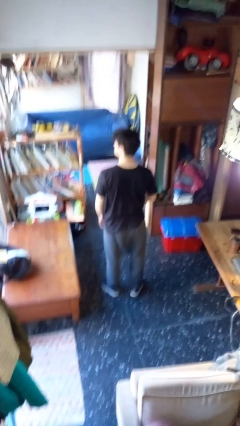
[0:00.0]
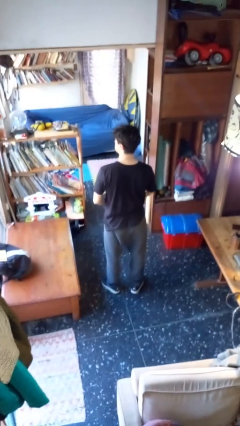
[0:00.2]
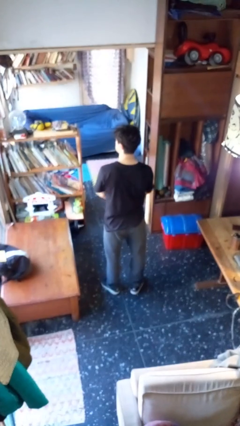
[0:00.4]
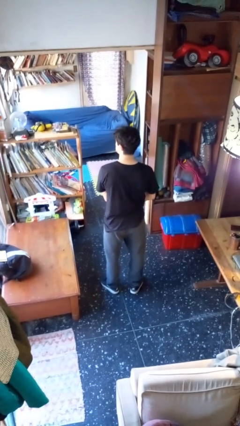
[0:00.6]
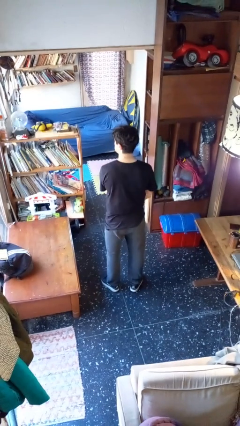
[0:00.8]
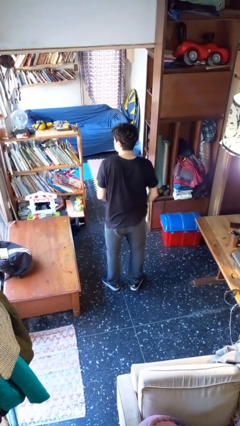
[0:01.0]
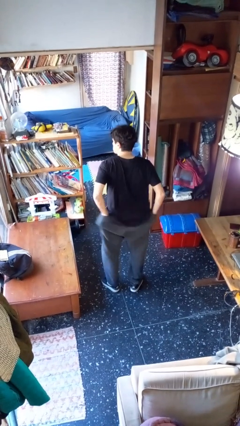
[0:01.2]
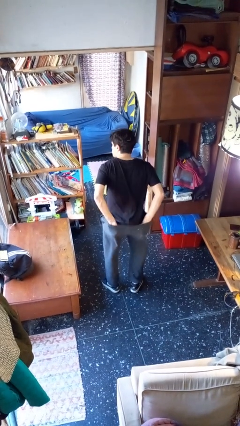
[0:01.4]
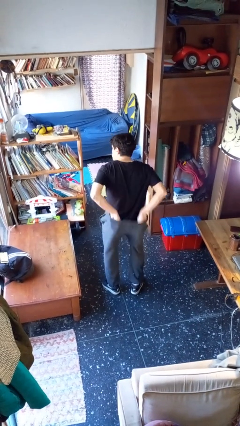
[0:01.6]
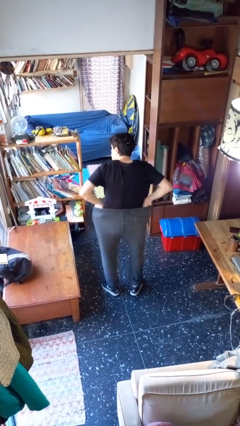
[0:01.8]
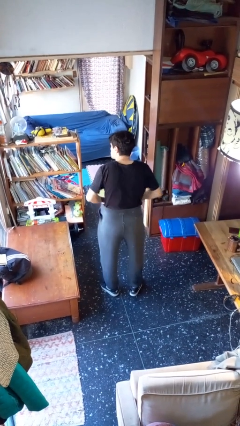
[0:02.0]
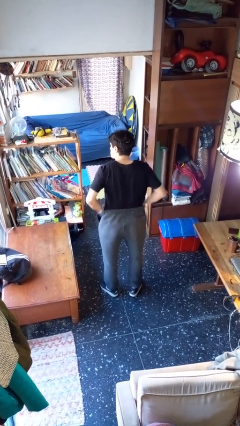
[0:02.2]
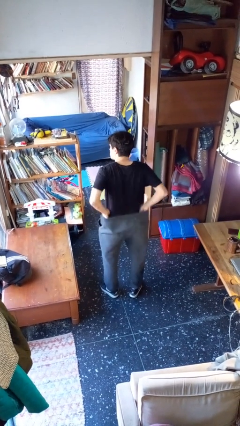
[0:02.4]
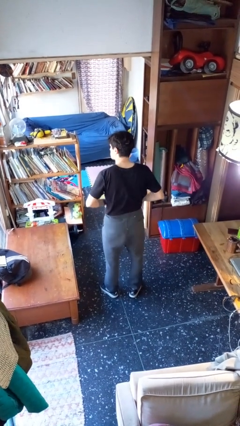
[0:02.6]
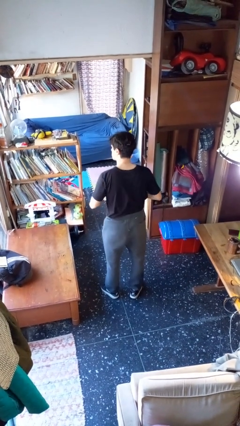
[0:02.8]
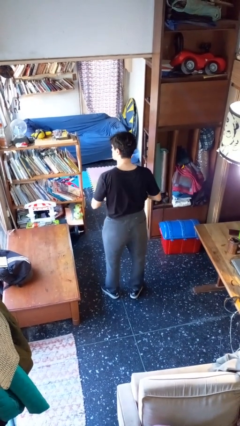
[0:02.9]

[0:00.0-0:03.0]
person tucks in shirt

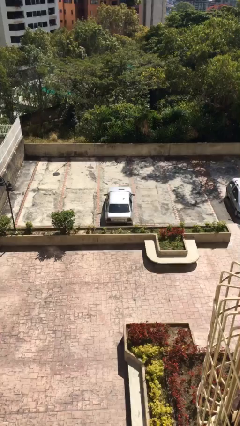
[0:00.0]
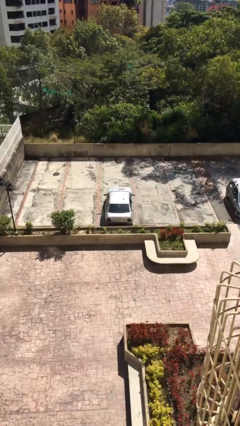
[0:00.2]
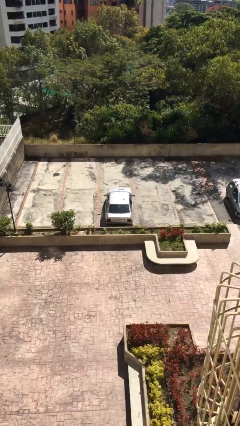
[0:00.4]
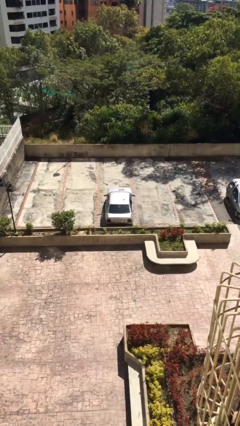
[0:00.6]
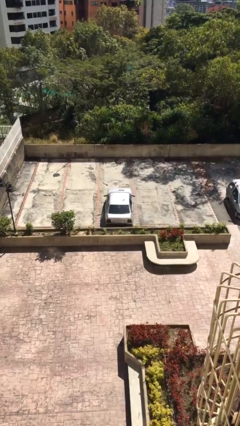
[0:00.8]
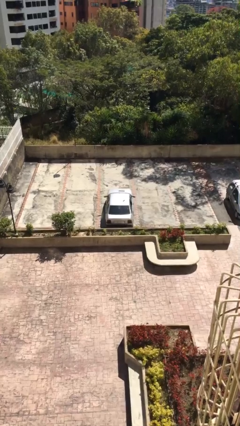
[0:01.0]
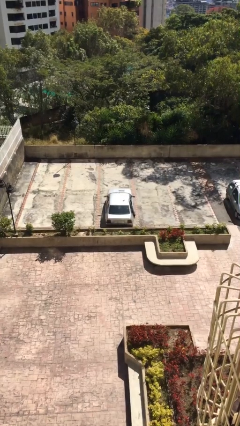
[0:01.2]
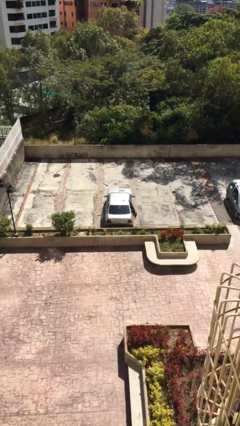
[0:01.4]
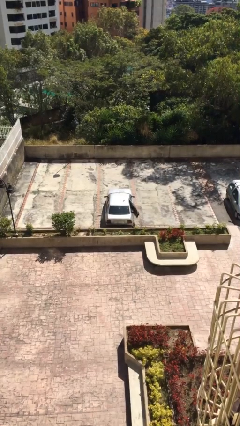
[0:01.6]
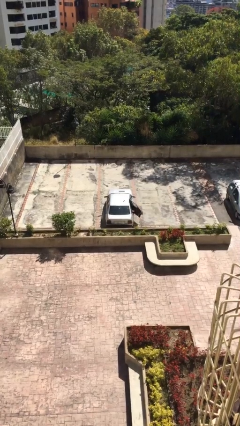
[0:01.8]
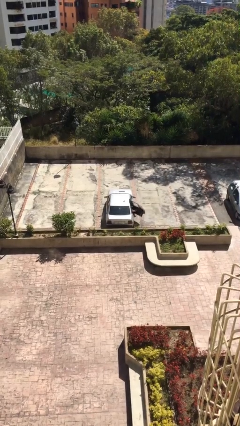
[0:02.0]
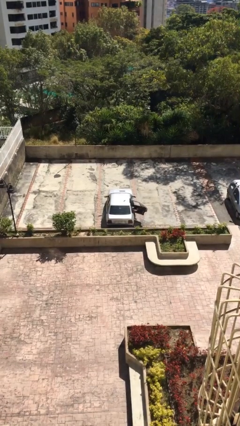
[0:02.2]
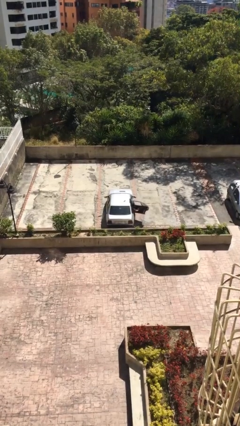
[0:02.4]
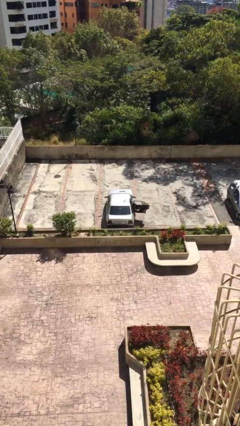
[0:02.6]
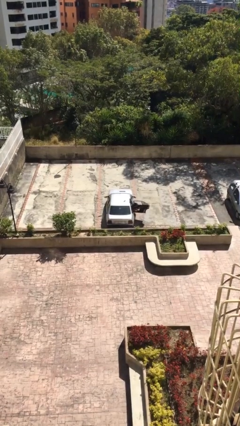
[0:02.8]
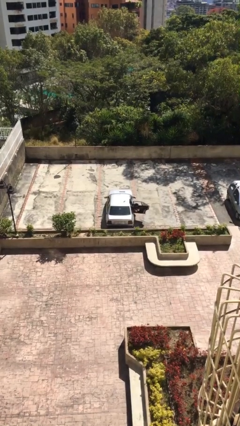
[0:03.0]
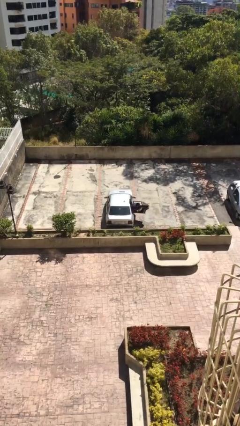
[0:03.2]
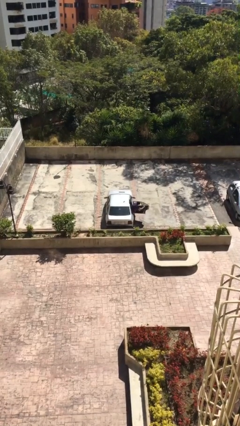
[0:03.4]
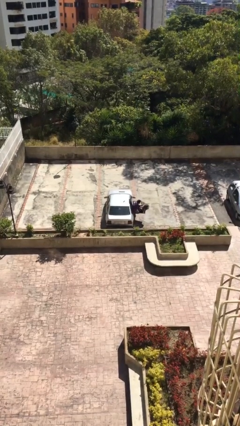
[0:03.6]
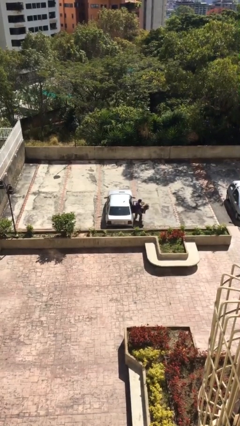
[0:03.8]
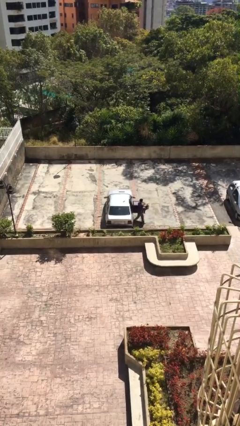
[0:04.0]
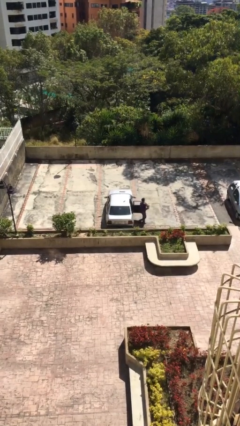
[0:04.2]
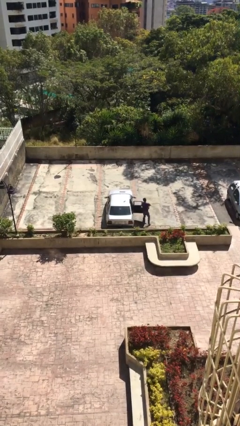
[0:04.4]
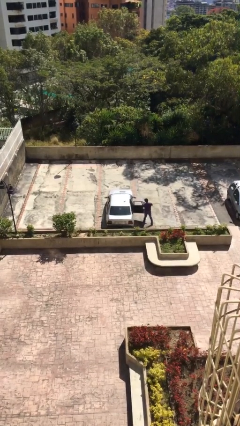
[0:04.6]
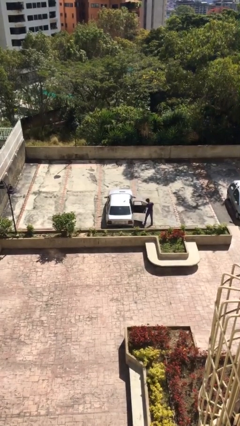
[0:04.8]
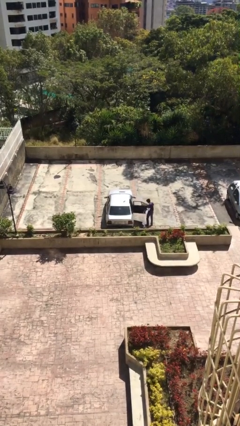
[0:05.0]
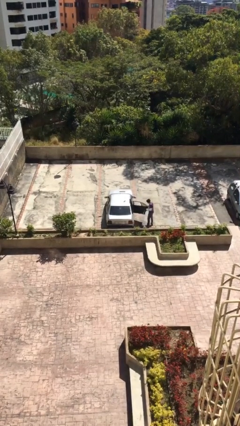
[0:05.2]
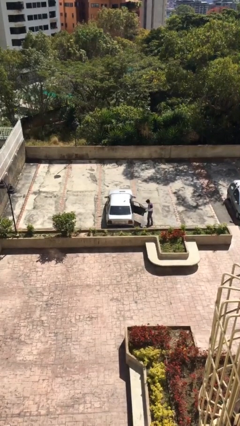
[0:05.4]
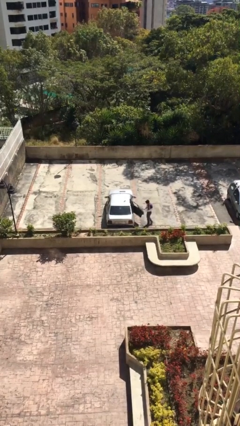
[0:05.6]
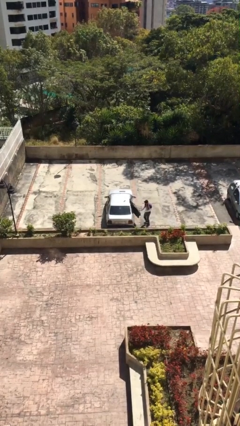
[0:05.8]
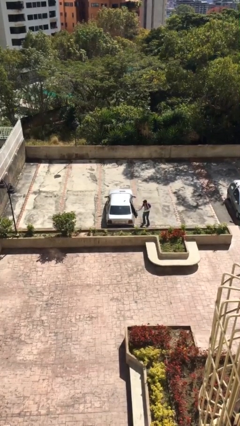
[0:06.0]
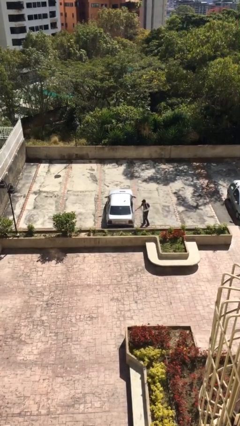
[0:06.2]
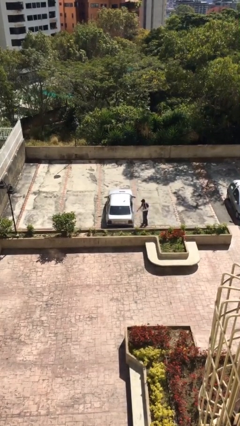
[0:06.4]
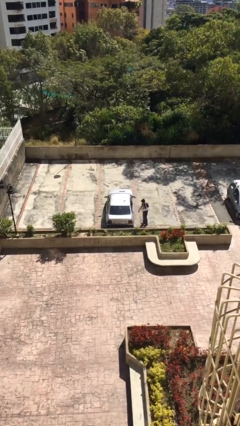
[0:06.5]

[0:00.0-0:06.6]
car drops off person

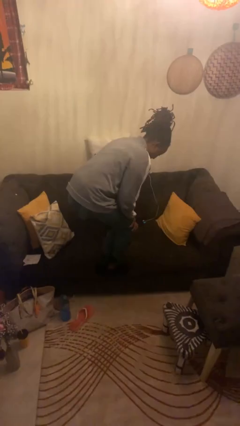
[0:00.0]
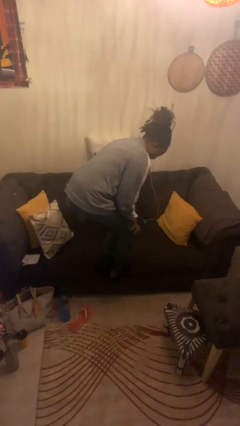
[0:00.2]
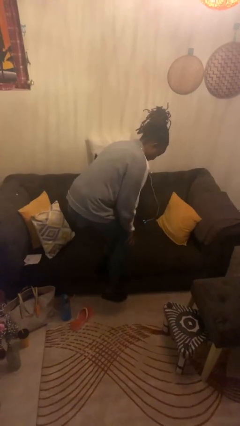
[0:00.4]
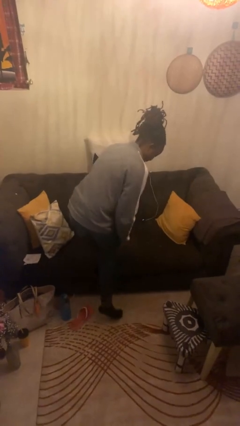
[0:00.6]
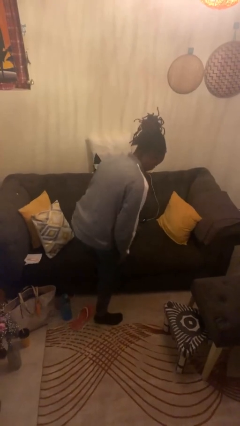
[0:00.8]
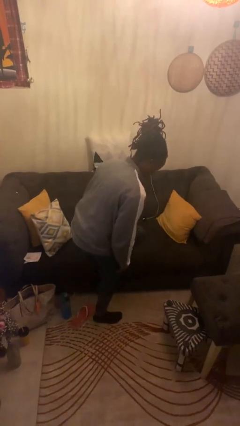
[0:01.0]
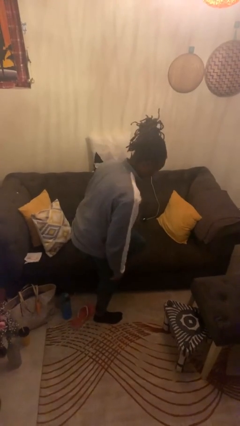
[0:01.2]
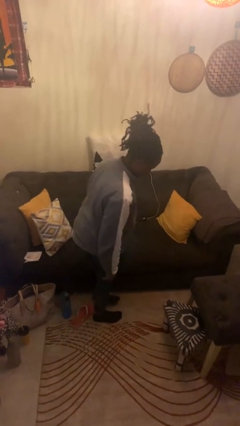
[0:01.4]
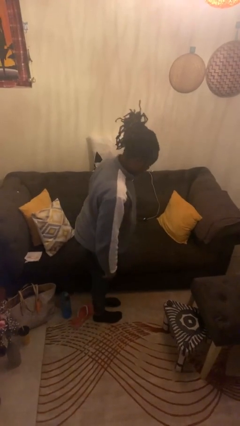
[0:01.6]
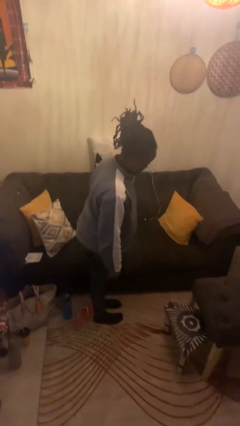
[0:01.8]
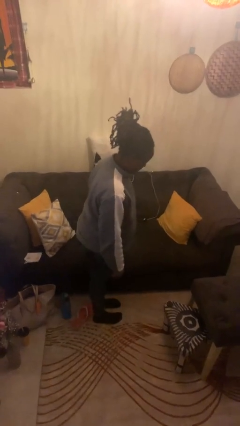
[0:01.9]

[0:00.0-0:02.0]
person climbs off chair

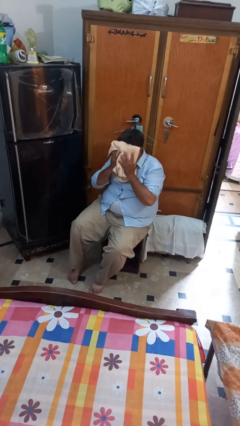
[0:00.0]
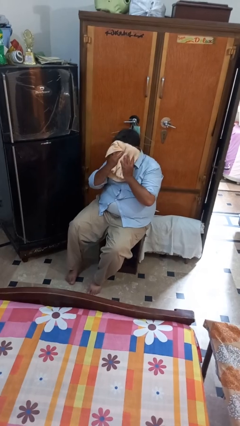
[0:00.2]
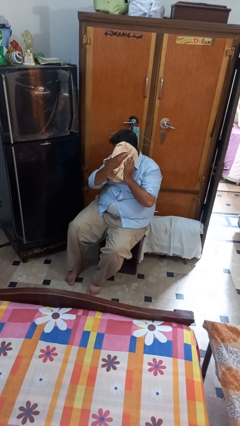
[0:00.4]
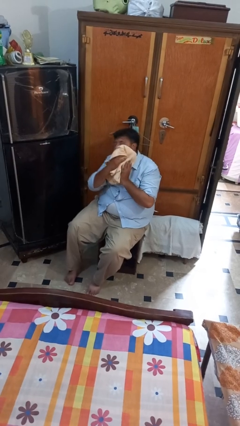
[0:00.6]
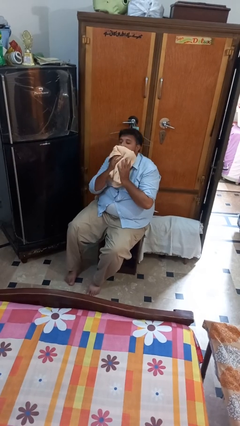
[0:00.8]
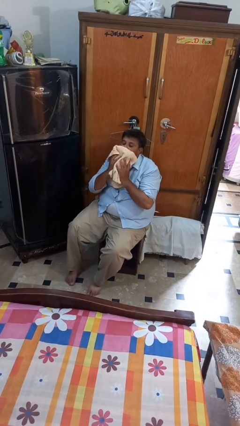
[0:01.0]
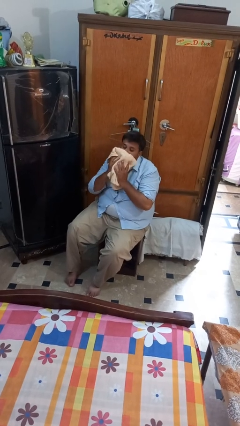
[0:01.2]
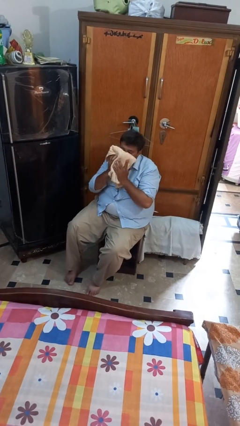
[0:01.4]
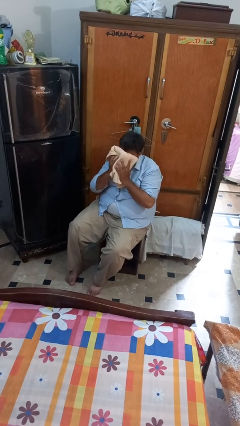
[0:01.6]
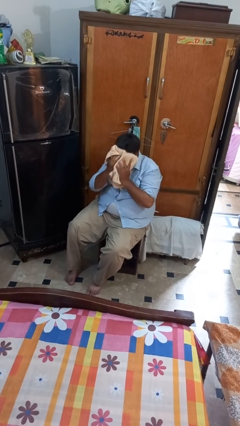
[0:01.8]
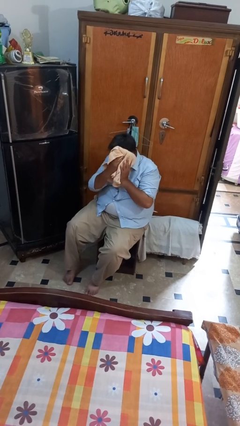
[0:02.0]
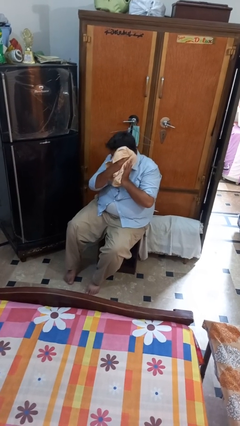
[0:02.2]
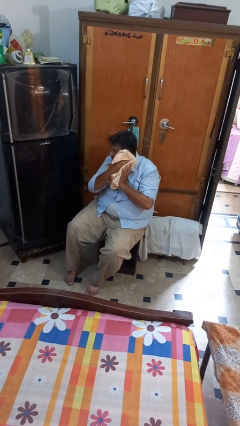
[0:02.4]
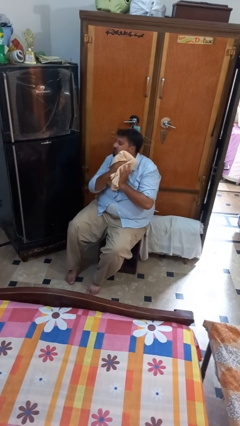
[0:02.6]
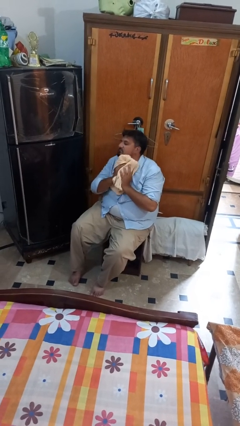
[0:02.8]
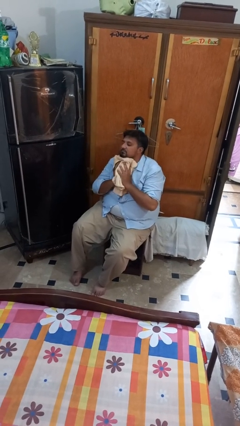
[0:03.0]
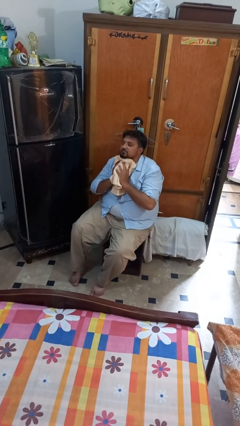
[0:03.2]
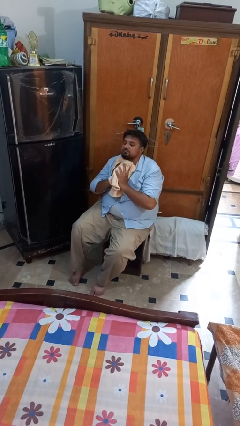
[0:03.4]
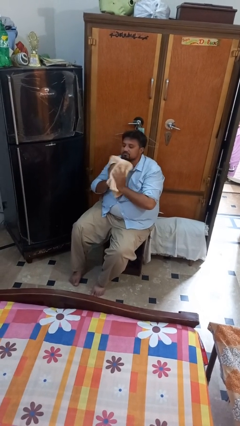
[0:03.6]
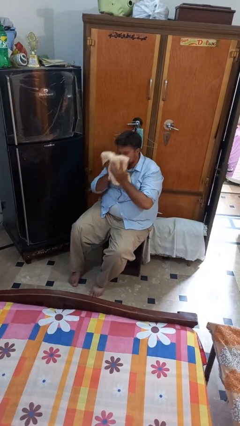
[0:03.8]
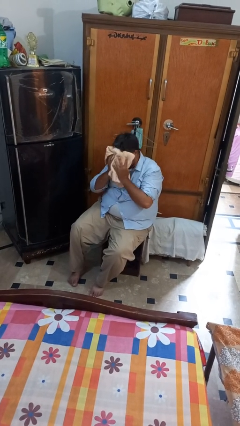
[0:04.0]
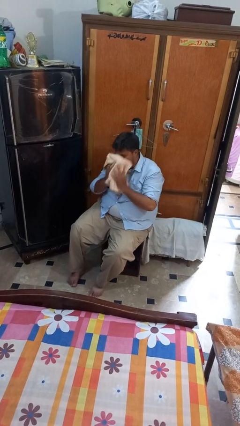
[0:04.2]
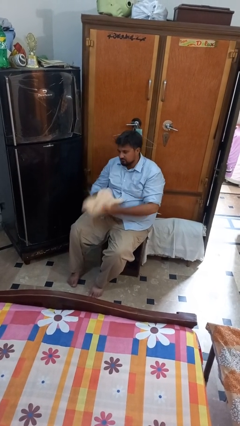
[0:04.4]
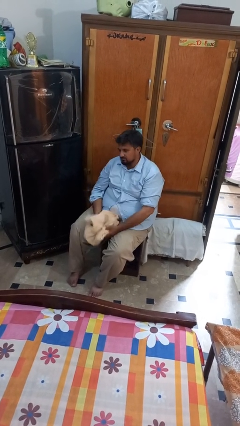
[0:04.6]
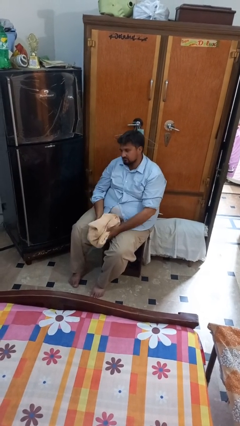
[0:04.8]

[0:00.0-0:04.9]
person wipes mouth with napkin

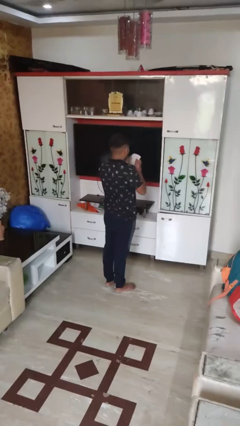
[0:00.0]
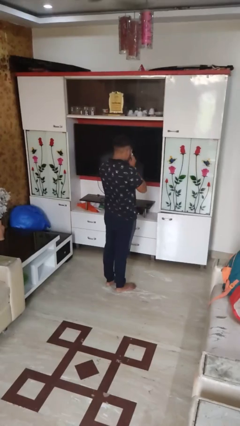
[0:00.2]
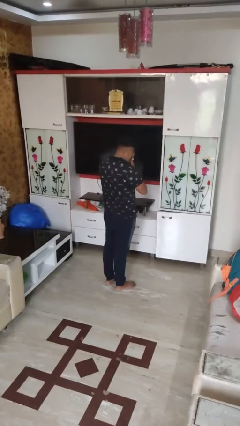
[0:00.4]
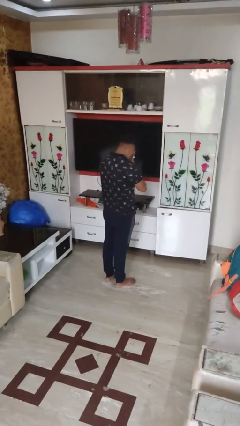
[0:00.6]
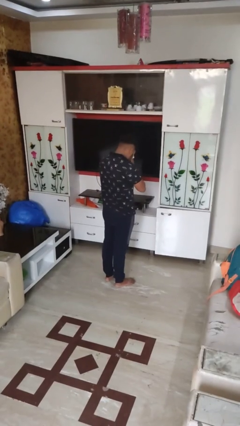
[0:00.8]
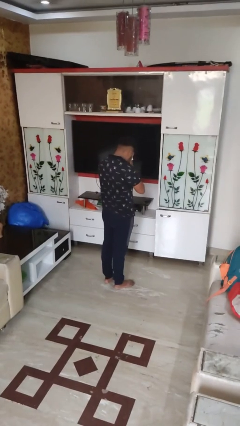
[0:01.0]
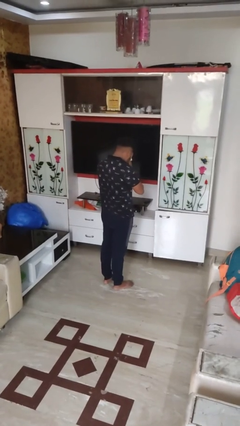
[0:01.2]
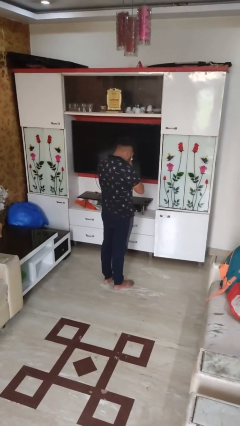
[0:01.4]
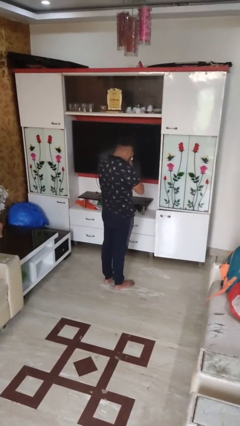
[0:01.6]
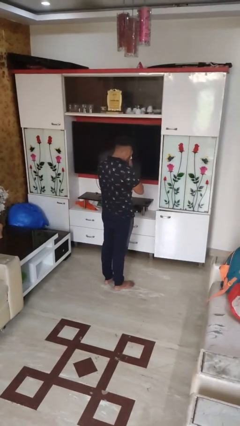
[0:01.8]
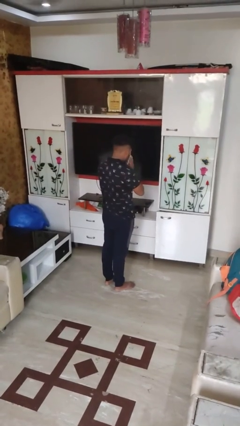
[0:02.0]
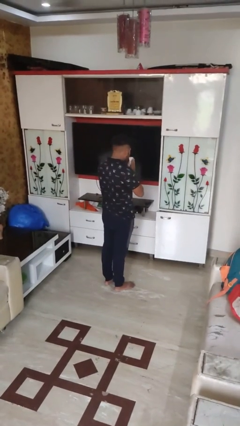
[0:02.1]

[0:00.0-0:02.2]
person blows nose
